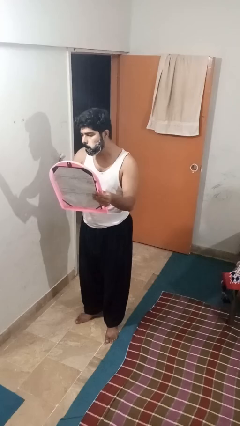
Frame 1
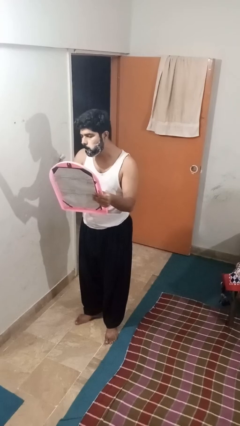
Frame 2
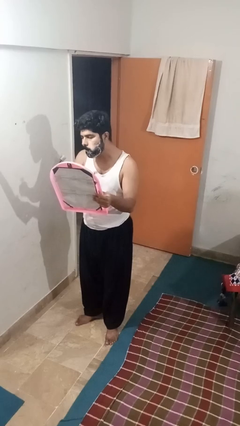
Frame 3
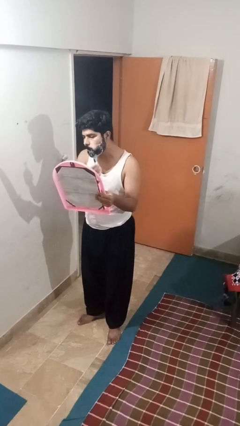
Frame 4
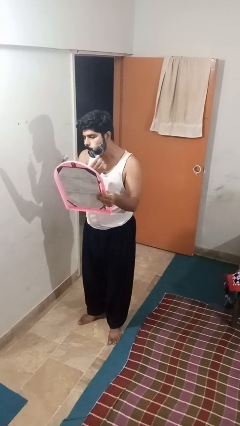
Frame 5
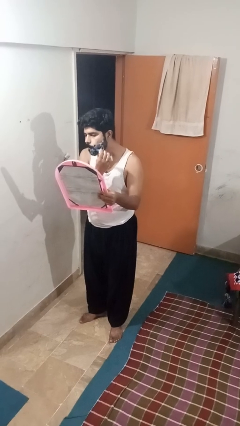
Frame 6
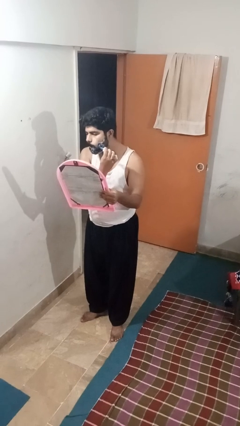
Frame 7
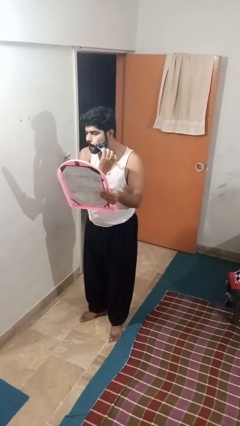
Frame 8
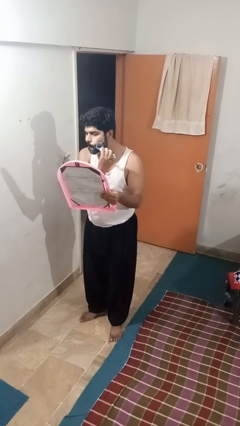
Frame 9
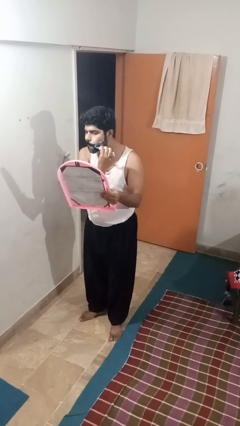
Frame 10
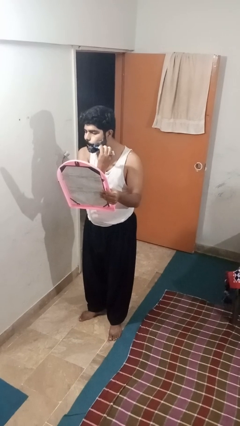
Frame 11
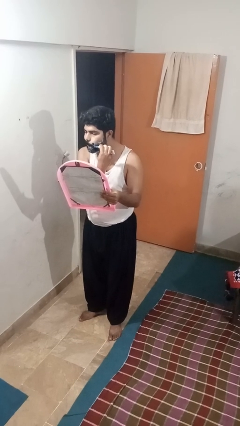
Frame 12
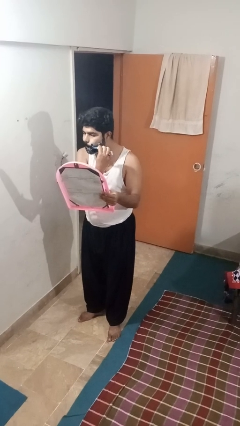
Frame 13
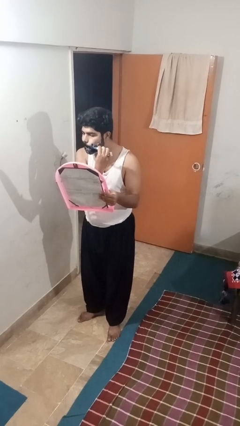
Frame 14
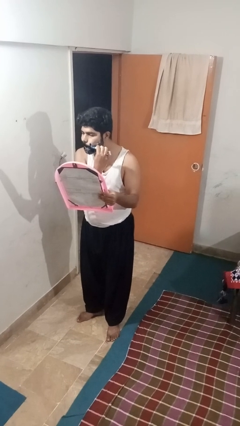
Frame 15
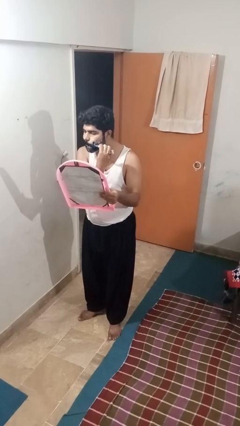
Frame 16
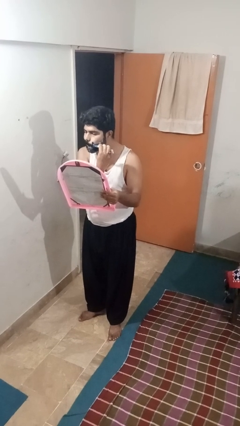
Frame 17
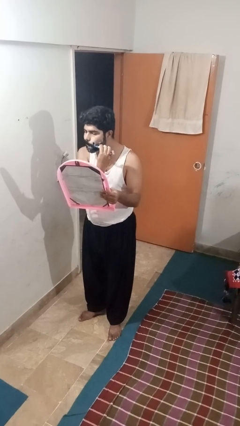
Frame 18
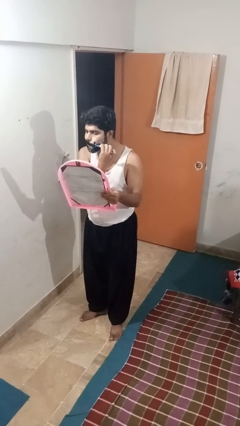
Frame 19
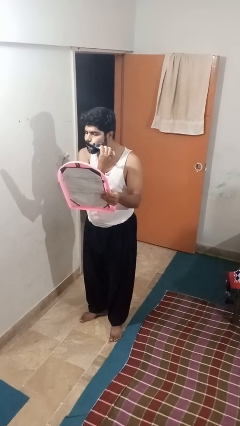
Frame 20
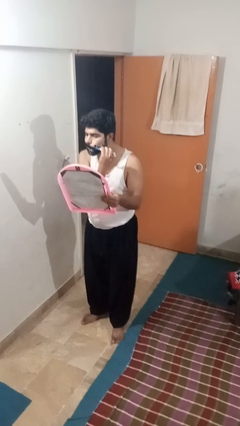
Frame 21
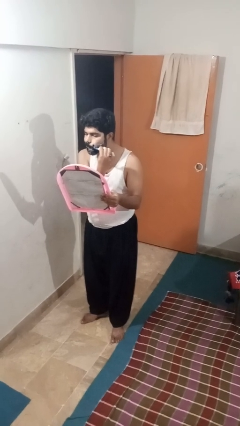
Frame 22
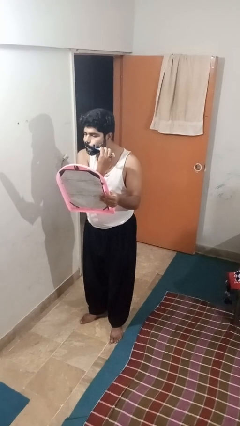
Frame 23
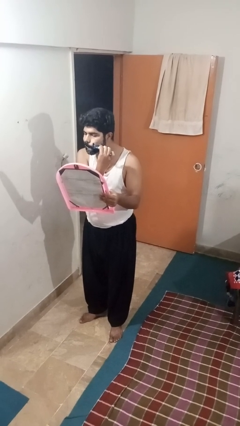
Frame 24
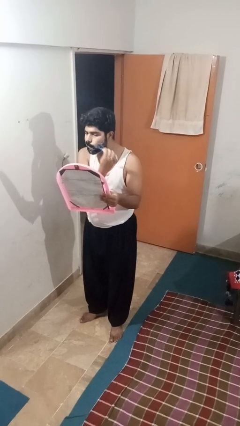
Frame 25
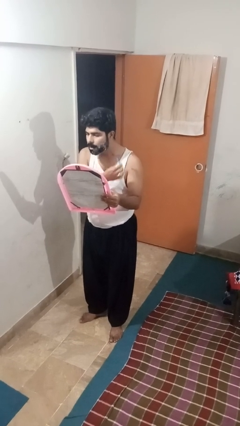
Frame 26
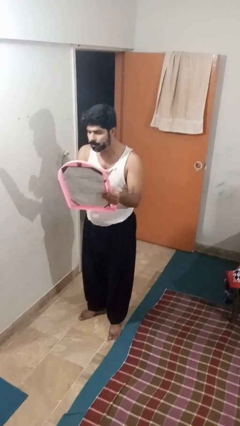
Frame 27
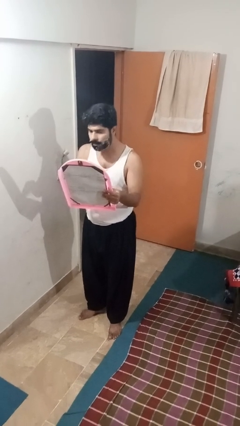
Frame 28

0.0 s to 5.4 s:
person shaves face

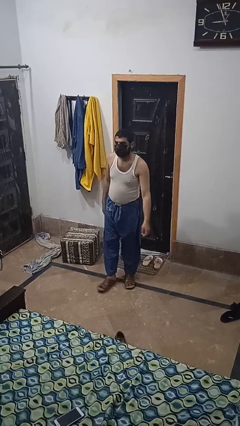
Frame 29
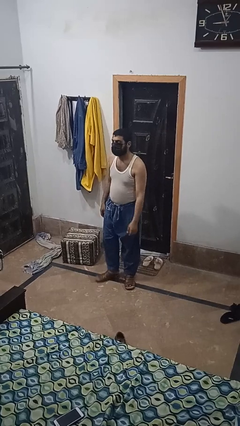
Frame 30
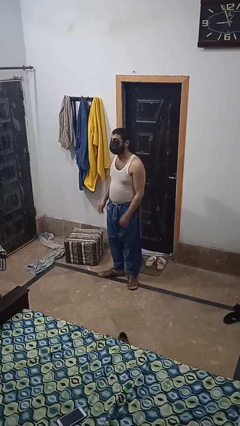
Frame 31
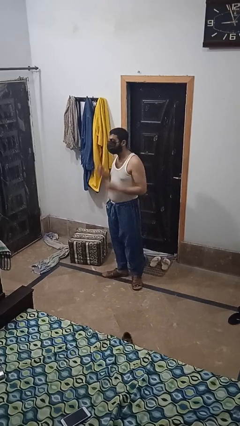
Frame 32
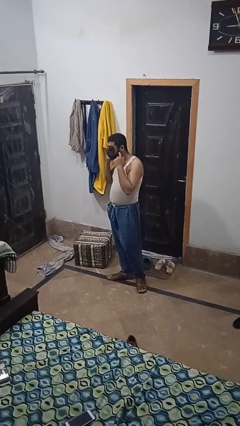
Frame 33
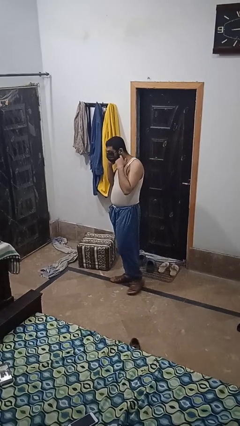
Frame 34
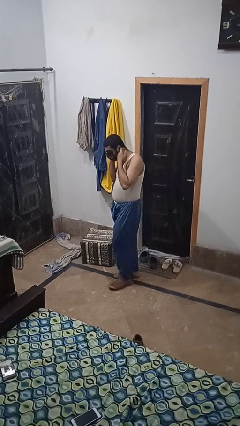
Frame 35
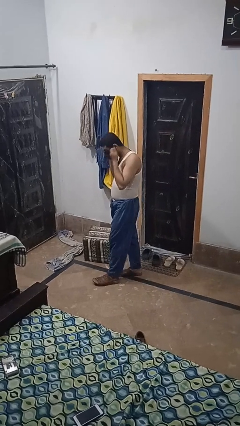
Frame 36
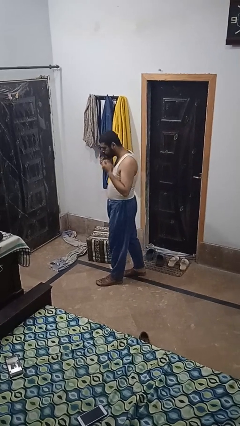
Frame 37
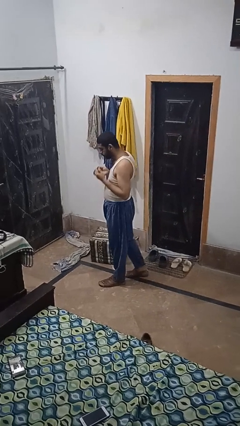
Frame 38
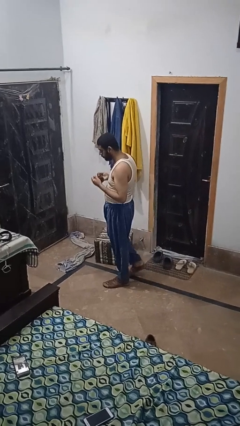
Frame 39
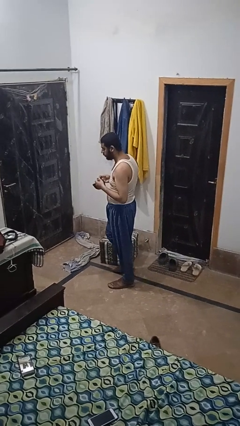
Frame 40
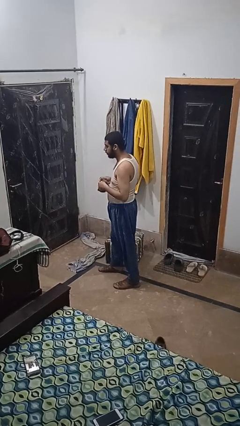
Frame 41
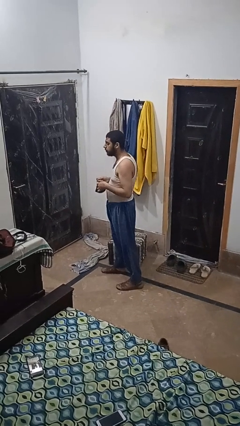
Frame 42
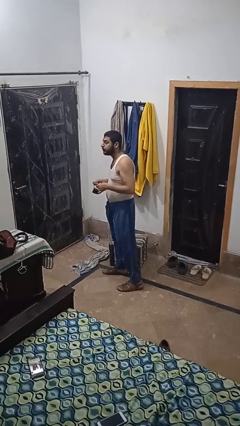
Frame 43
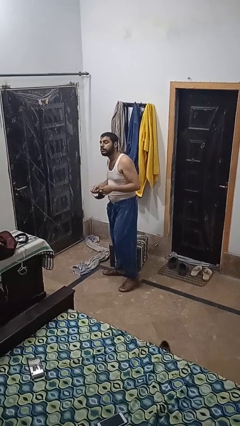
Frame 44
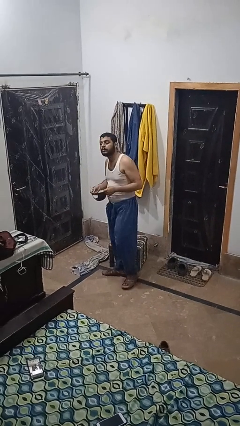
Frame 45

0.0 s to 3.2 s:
person takes off facemask

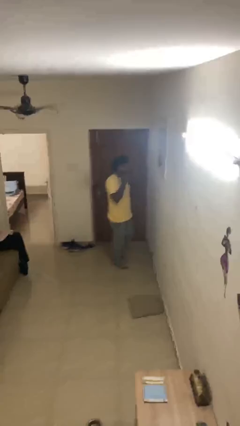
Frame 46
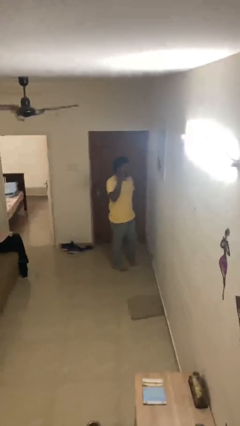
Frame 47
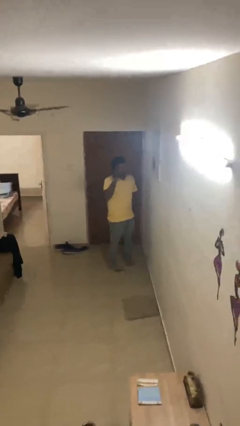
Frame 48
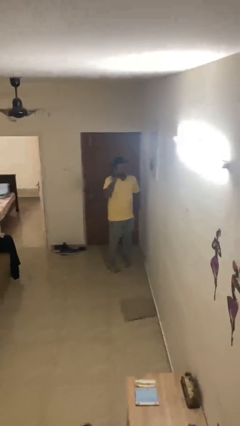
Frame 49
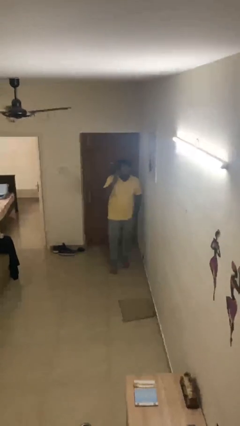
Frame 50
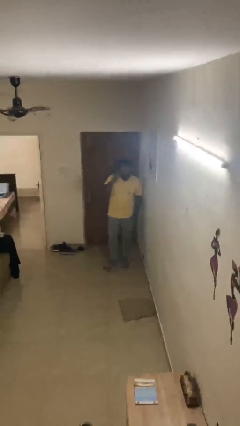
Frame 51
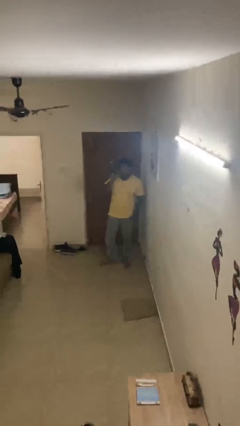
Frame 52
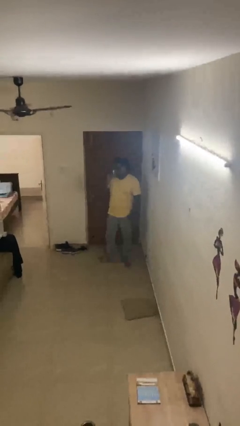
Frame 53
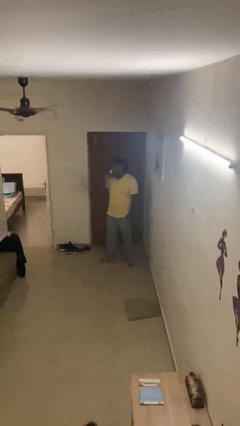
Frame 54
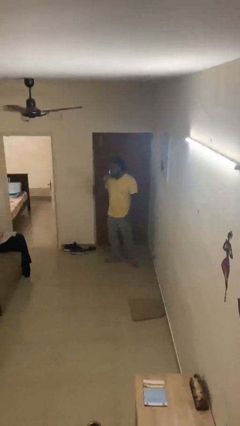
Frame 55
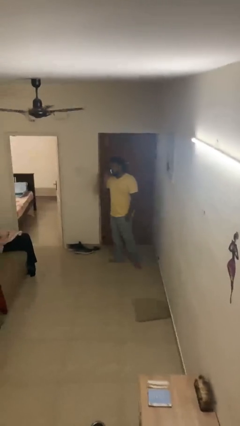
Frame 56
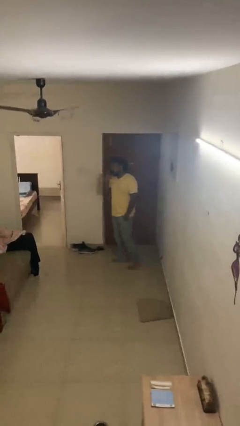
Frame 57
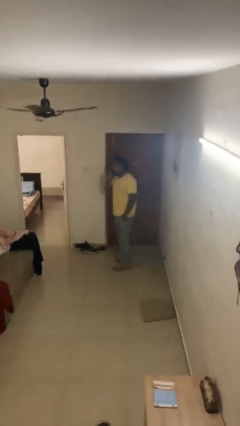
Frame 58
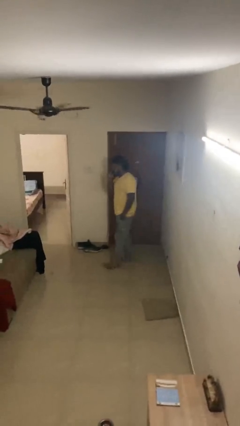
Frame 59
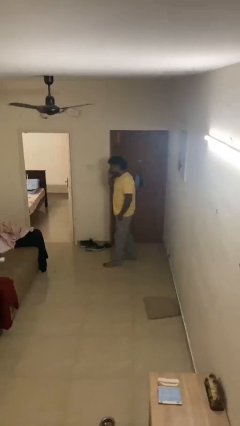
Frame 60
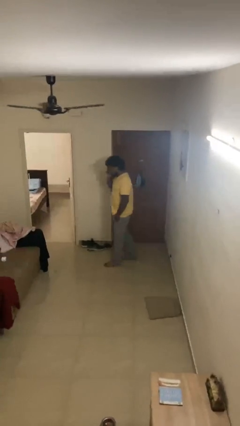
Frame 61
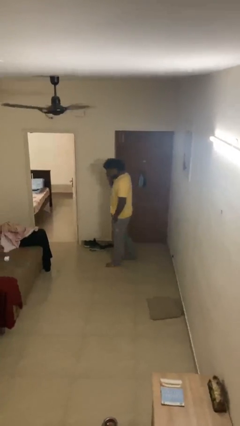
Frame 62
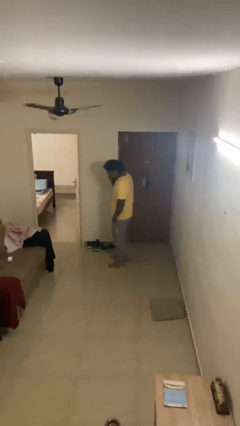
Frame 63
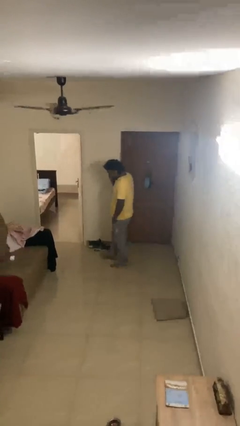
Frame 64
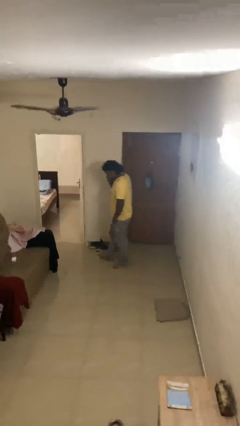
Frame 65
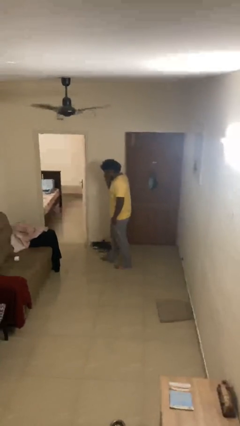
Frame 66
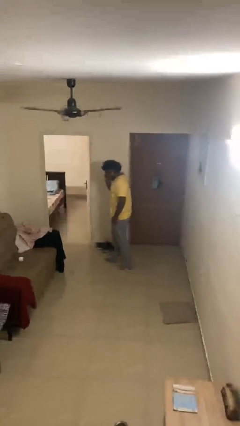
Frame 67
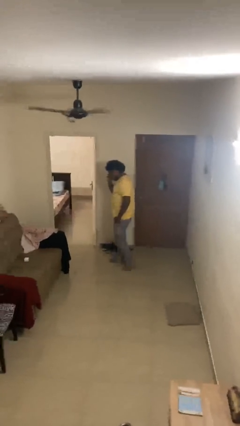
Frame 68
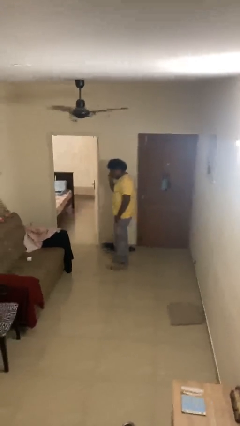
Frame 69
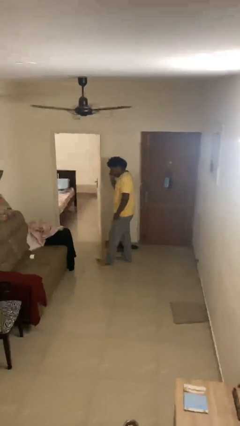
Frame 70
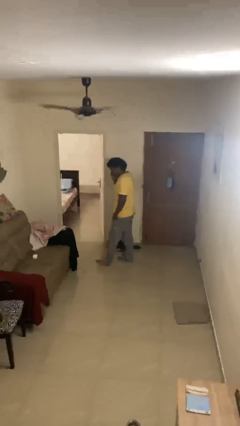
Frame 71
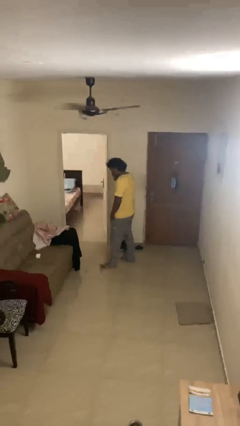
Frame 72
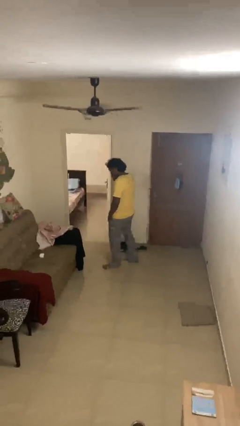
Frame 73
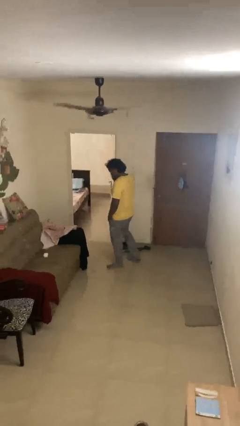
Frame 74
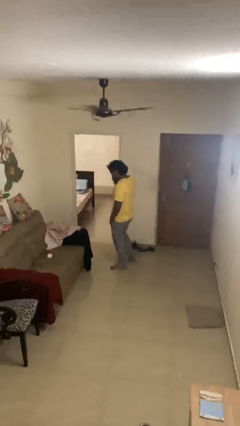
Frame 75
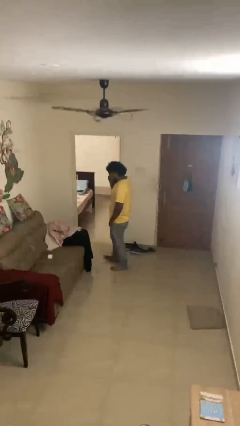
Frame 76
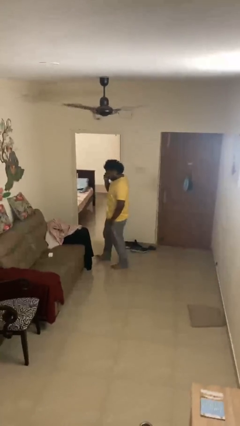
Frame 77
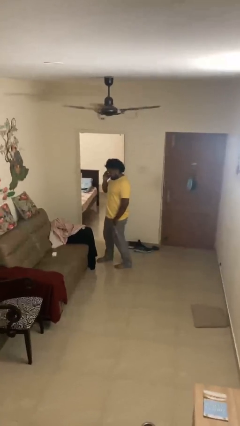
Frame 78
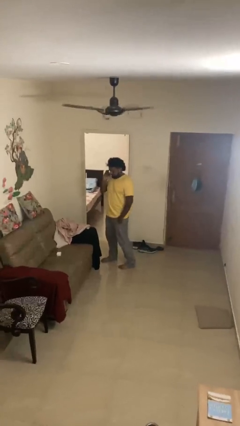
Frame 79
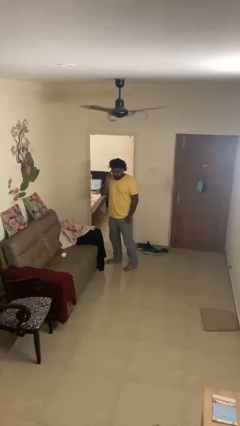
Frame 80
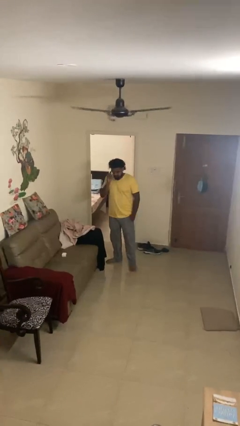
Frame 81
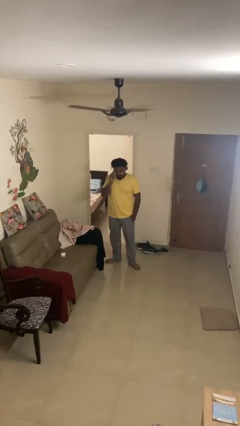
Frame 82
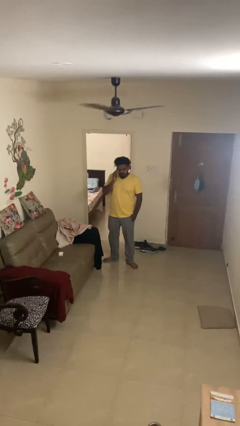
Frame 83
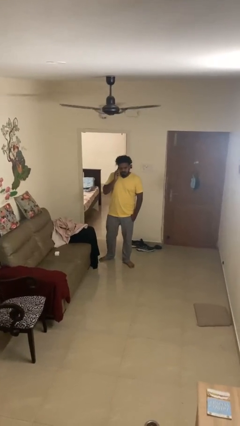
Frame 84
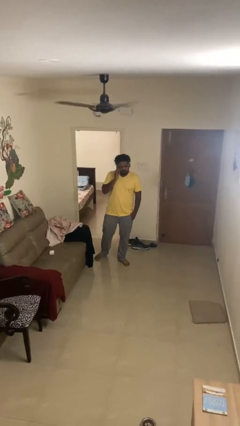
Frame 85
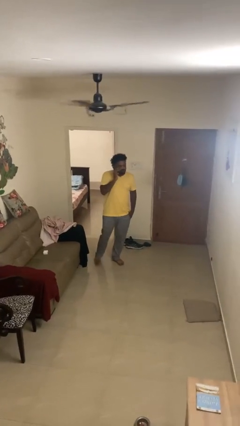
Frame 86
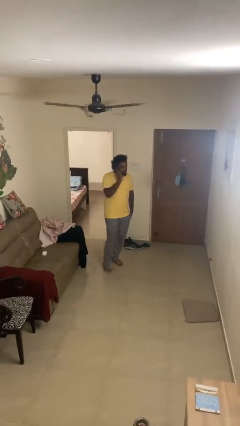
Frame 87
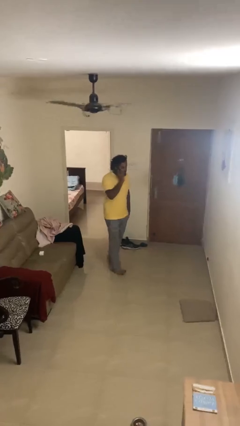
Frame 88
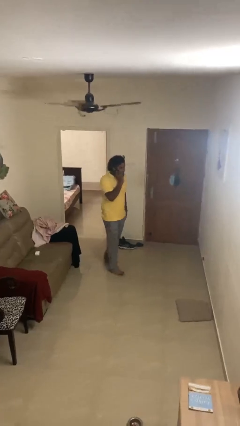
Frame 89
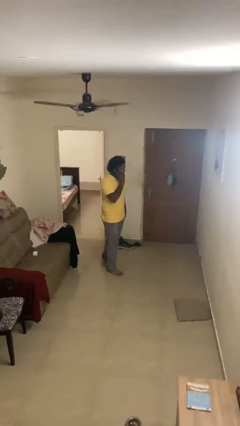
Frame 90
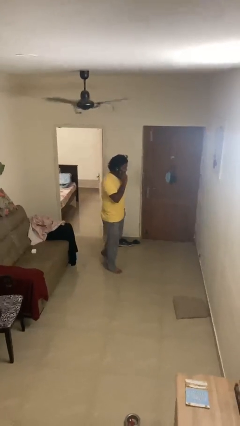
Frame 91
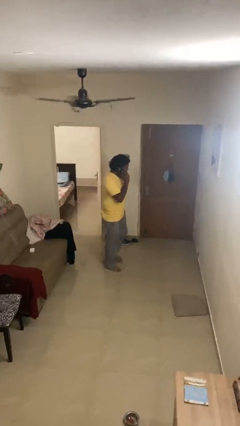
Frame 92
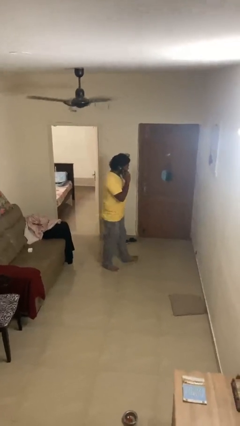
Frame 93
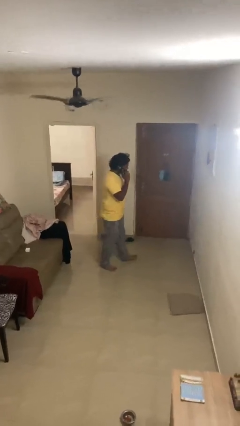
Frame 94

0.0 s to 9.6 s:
person talks on phone
